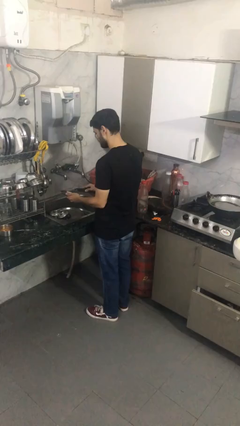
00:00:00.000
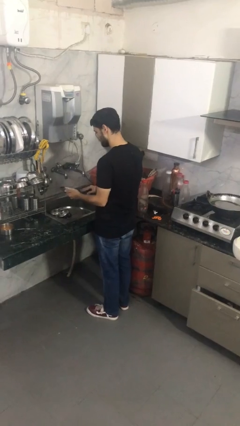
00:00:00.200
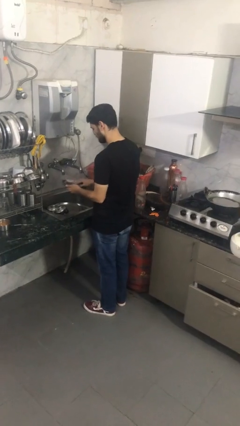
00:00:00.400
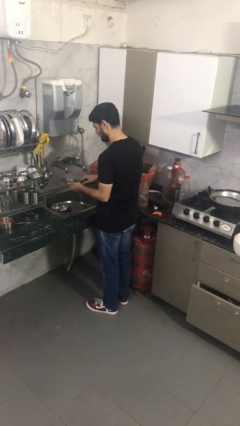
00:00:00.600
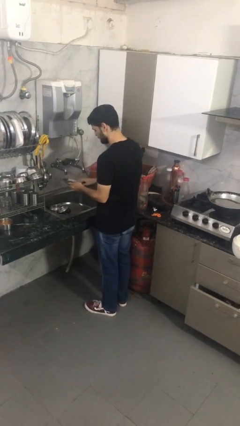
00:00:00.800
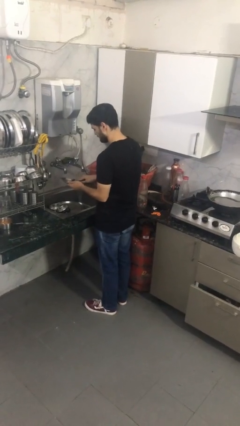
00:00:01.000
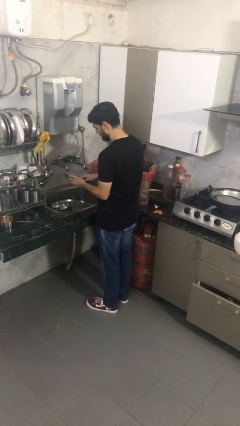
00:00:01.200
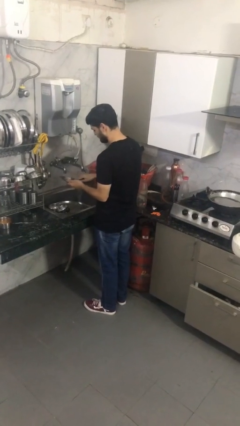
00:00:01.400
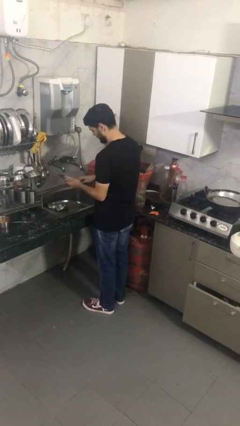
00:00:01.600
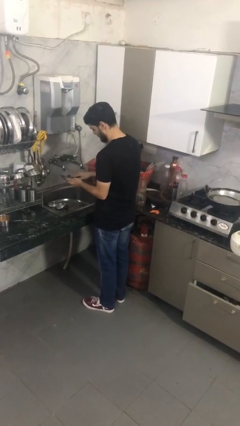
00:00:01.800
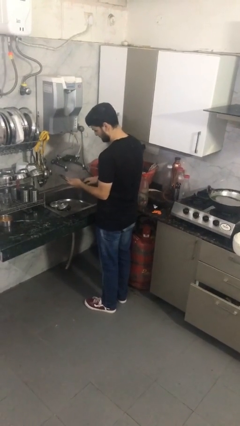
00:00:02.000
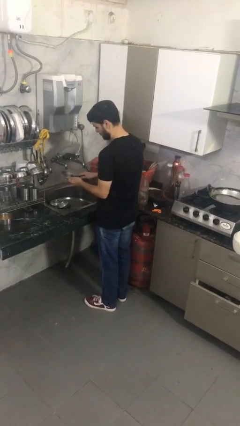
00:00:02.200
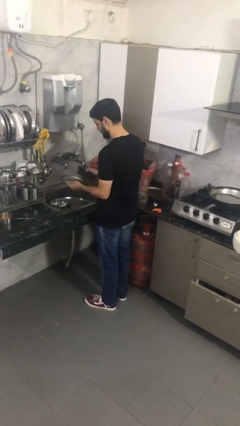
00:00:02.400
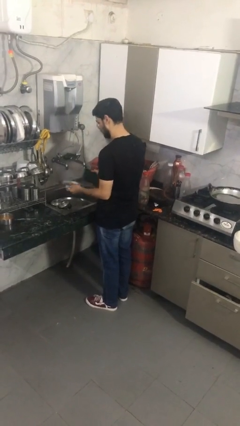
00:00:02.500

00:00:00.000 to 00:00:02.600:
person washes dish

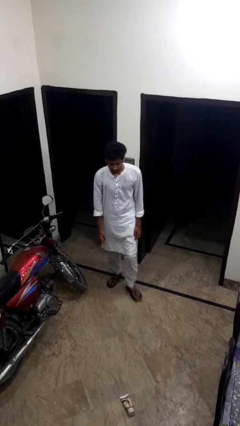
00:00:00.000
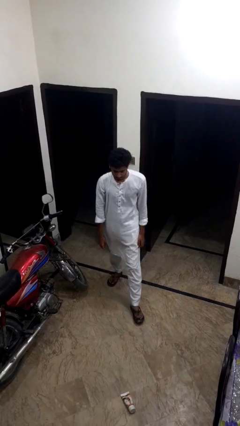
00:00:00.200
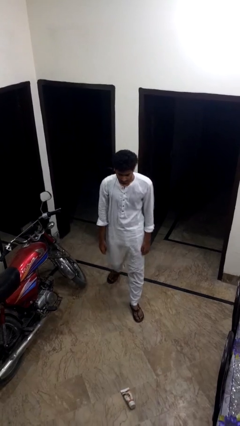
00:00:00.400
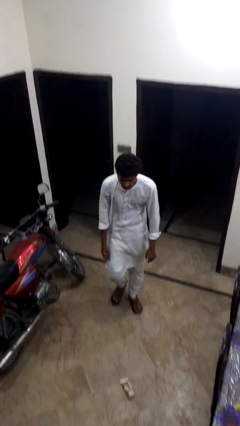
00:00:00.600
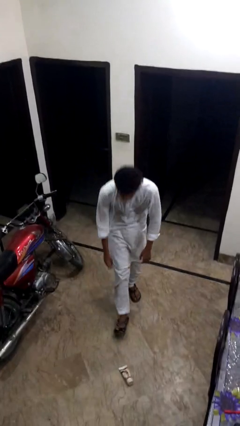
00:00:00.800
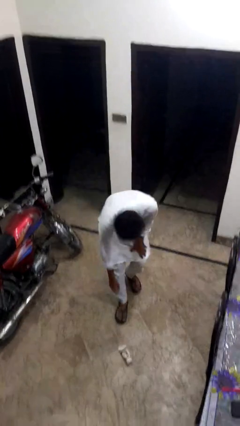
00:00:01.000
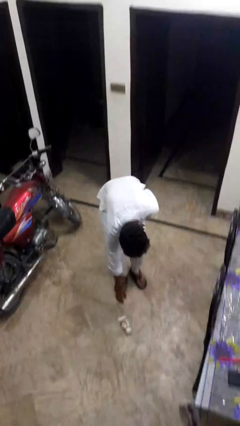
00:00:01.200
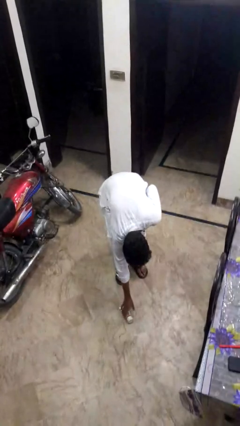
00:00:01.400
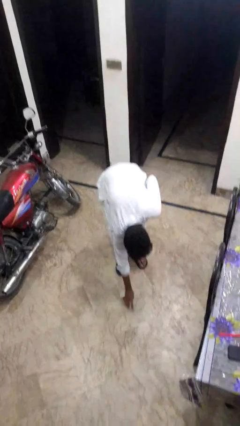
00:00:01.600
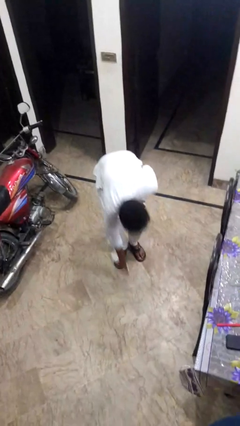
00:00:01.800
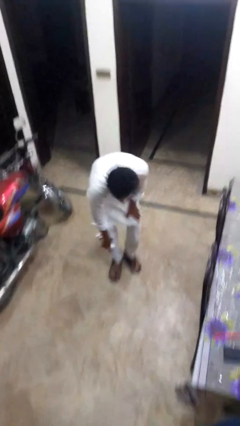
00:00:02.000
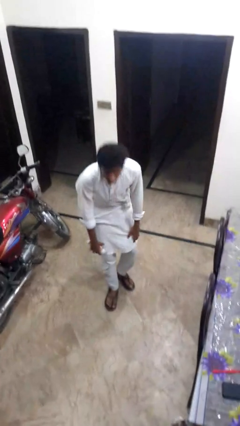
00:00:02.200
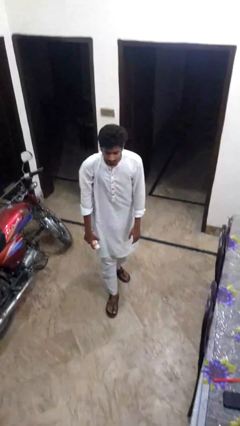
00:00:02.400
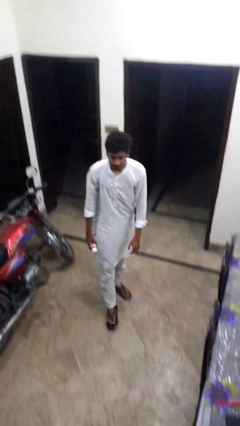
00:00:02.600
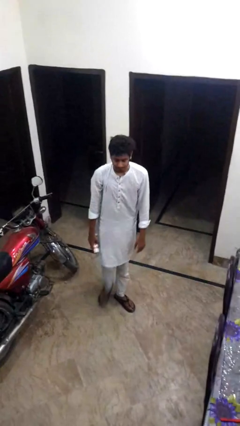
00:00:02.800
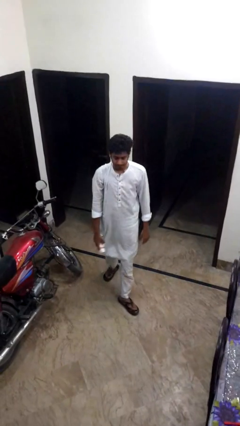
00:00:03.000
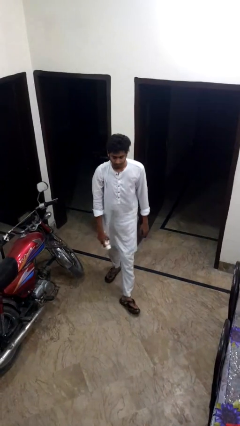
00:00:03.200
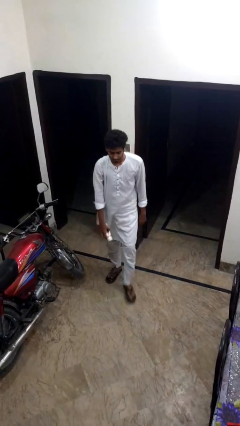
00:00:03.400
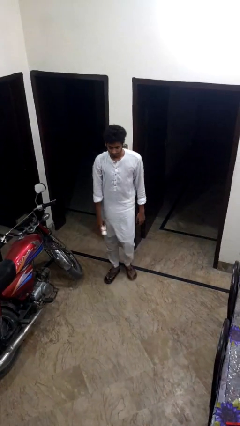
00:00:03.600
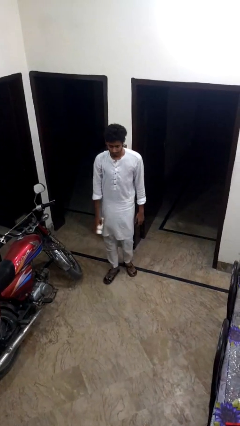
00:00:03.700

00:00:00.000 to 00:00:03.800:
person picks up object from floor

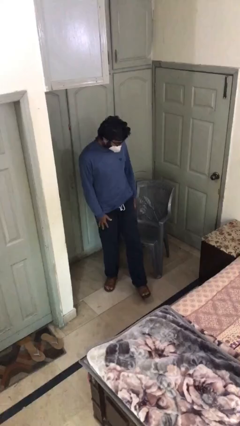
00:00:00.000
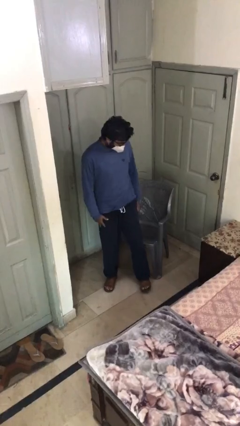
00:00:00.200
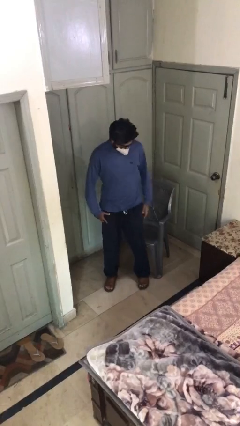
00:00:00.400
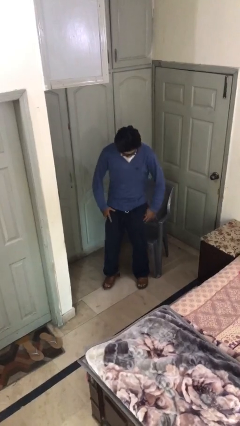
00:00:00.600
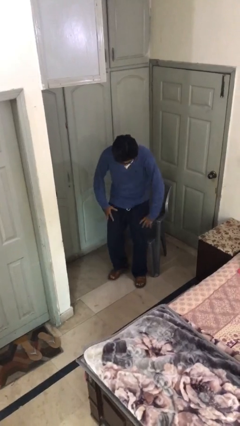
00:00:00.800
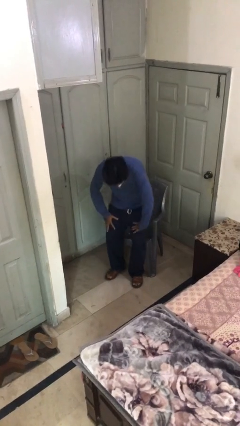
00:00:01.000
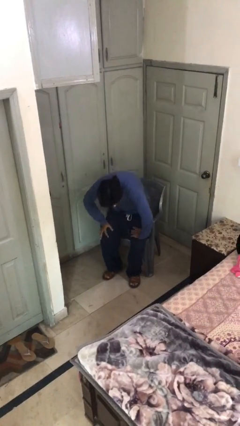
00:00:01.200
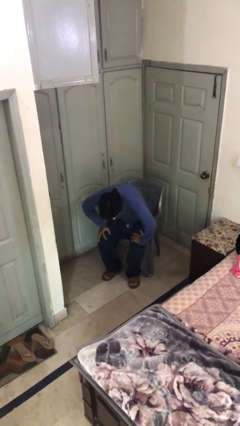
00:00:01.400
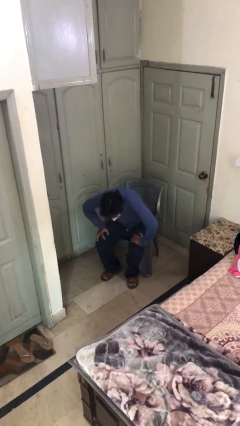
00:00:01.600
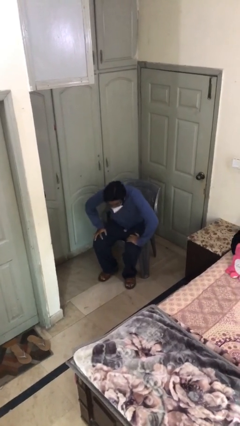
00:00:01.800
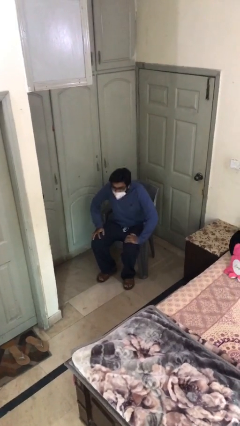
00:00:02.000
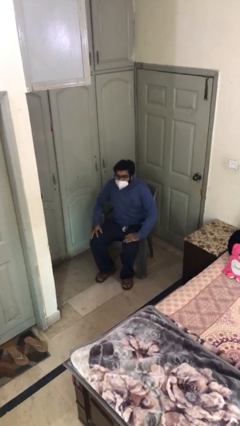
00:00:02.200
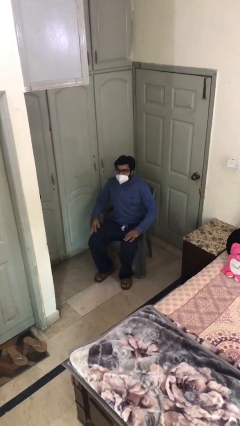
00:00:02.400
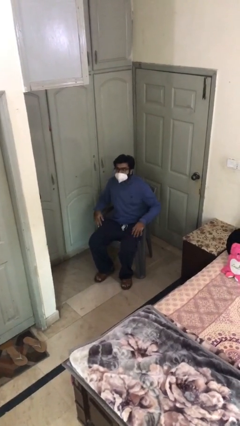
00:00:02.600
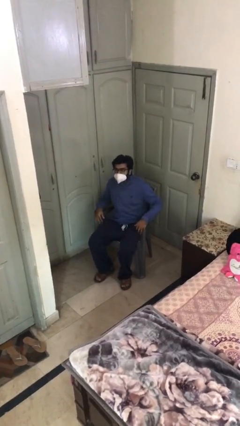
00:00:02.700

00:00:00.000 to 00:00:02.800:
person sits down

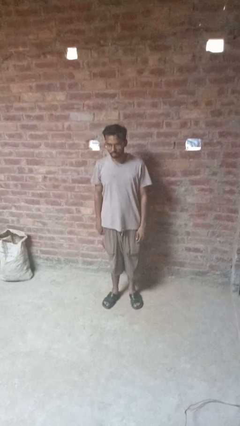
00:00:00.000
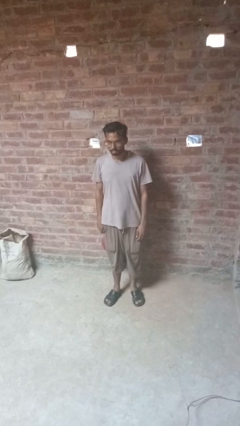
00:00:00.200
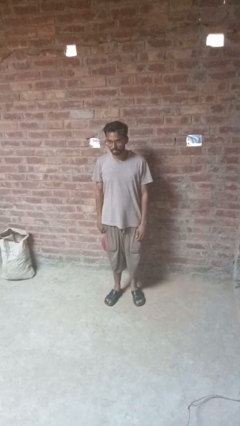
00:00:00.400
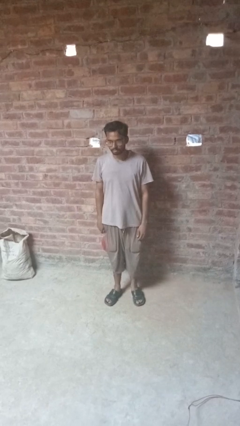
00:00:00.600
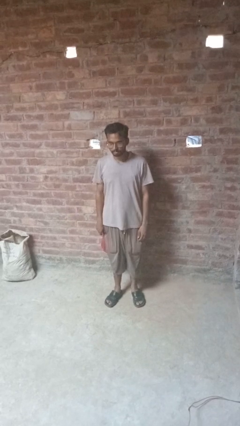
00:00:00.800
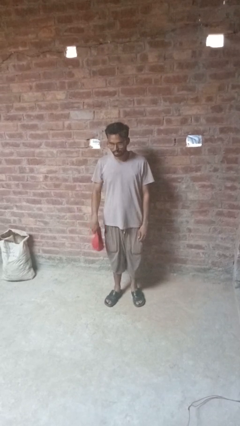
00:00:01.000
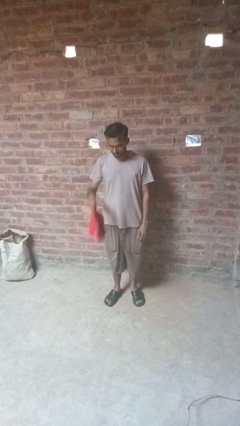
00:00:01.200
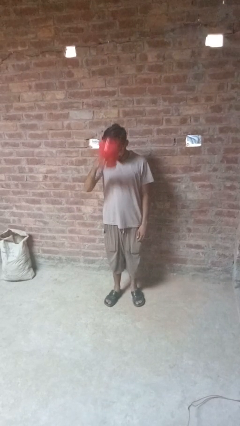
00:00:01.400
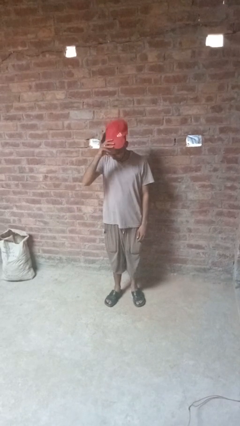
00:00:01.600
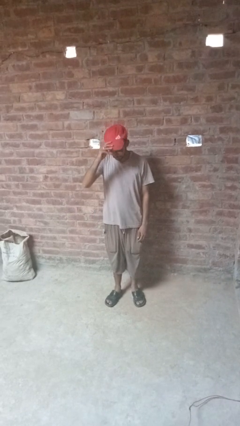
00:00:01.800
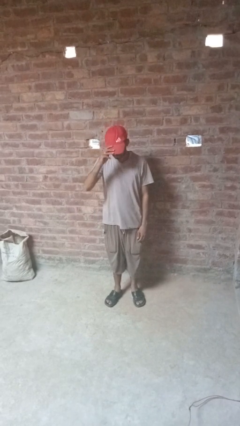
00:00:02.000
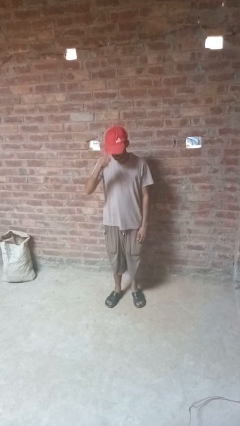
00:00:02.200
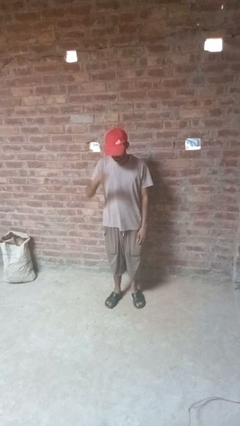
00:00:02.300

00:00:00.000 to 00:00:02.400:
person puts on hat

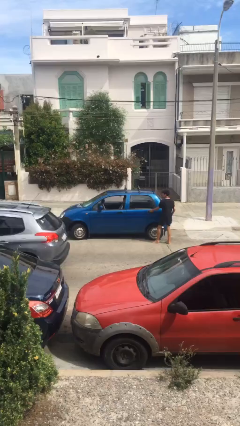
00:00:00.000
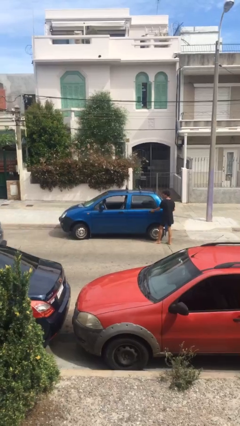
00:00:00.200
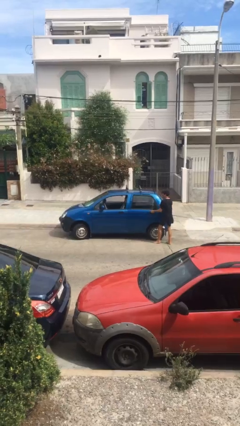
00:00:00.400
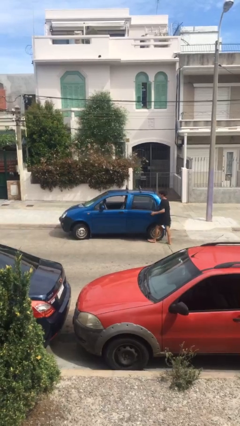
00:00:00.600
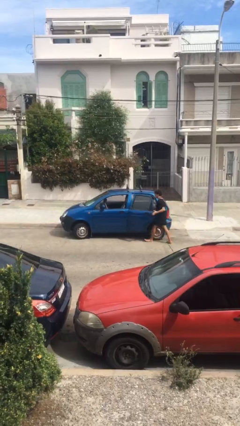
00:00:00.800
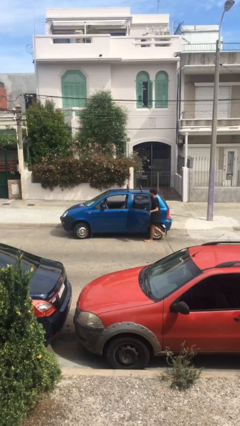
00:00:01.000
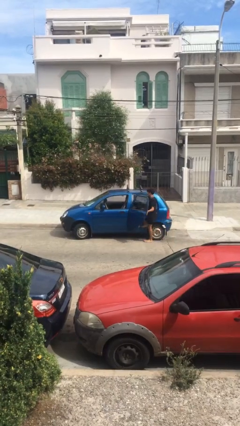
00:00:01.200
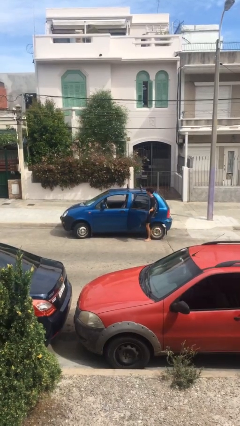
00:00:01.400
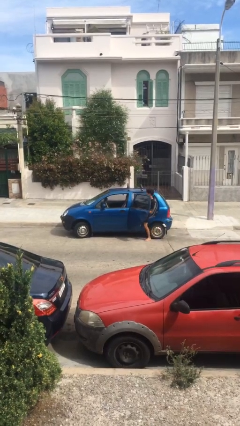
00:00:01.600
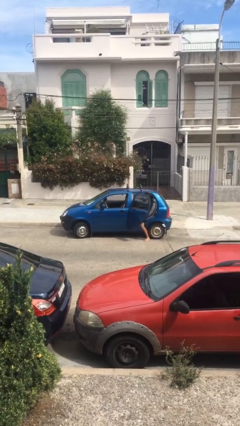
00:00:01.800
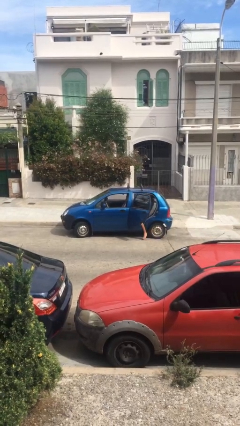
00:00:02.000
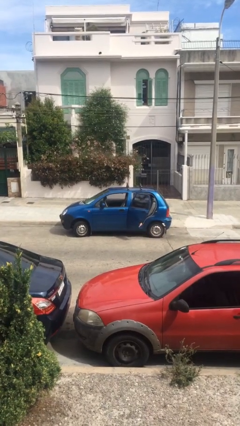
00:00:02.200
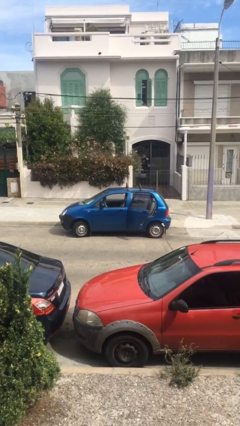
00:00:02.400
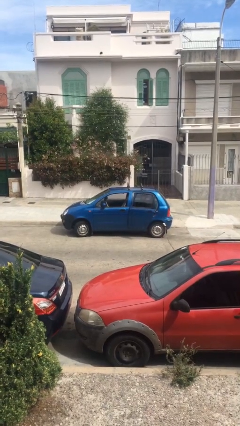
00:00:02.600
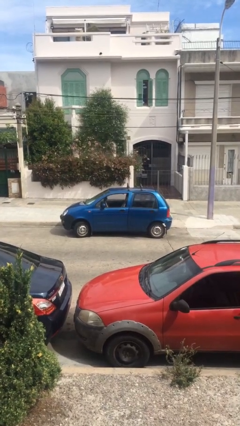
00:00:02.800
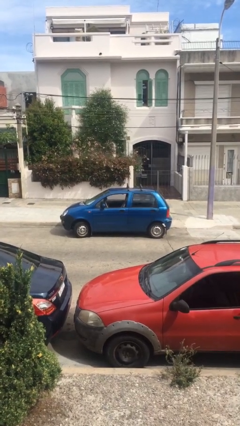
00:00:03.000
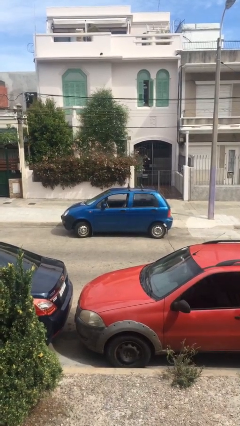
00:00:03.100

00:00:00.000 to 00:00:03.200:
car picks up person

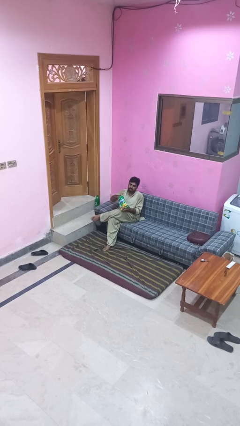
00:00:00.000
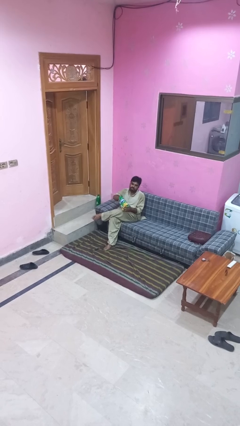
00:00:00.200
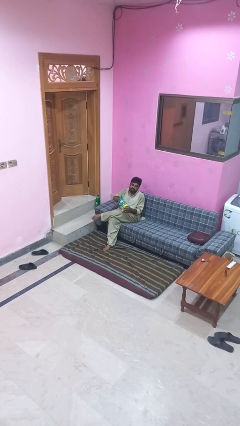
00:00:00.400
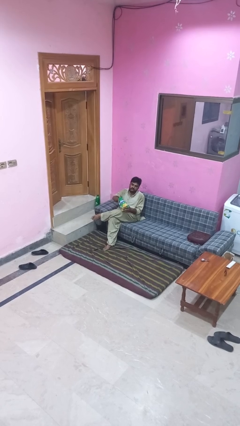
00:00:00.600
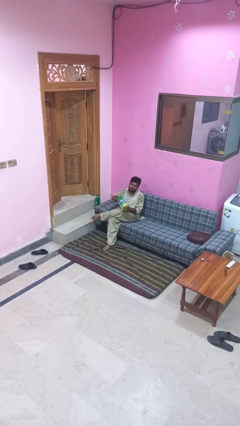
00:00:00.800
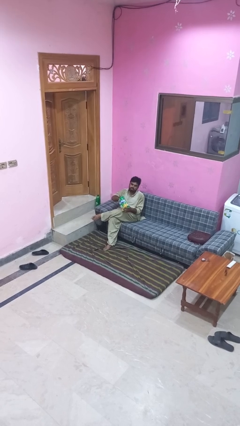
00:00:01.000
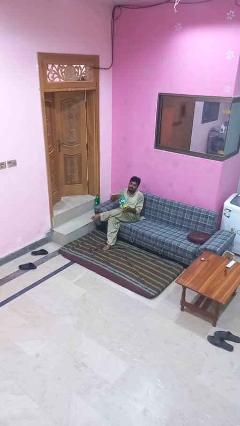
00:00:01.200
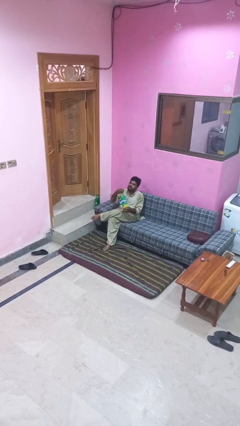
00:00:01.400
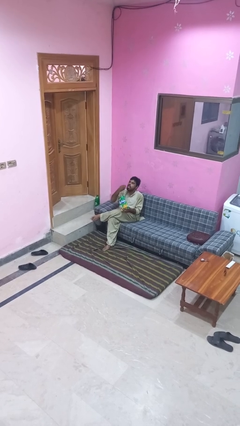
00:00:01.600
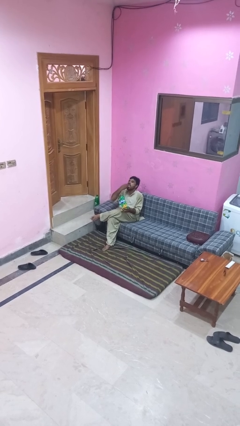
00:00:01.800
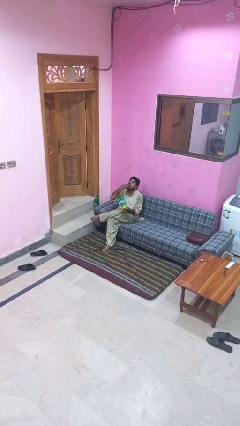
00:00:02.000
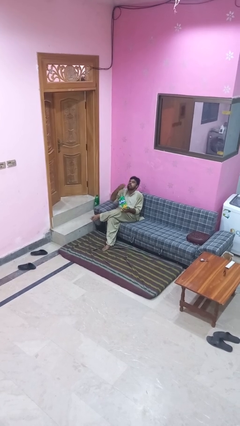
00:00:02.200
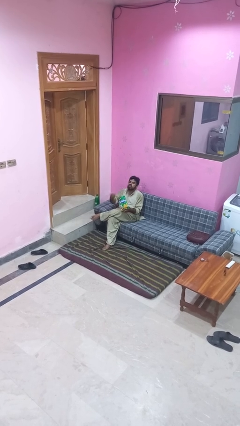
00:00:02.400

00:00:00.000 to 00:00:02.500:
person eats snack from bag
